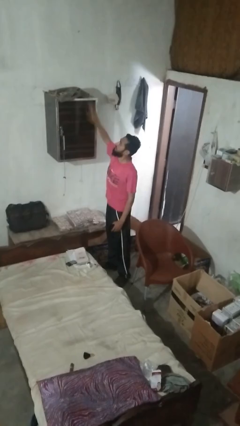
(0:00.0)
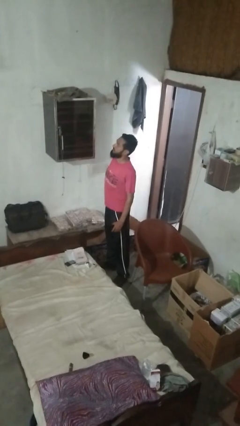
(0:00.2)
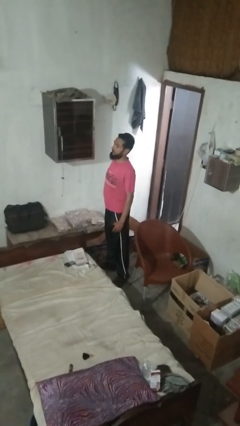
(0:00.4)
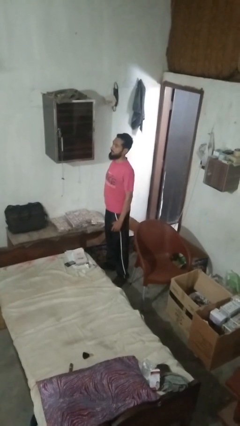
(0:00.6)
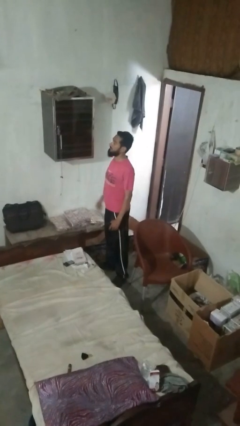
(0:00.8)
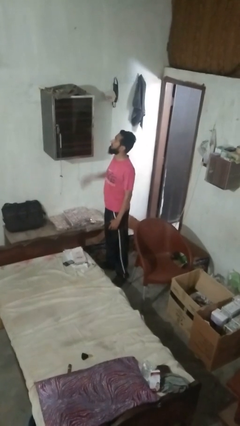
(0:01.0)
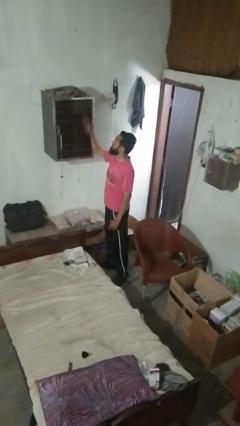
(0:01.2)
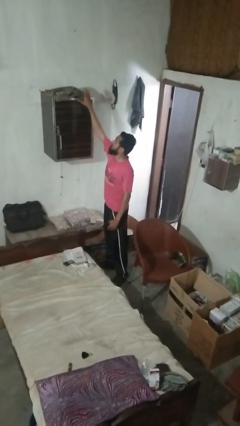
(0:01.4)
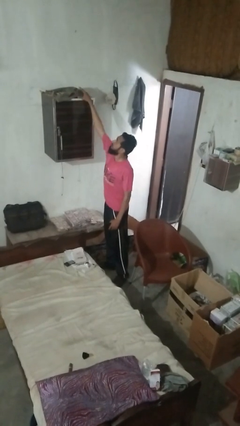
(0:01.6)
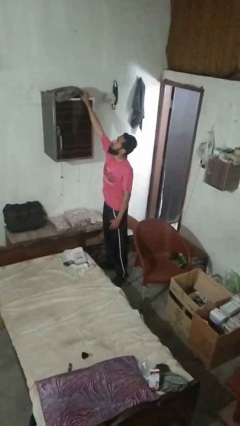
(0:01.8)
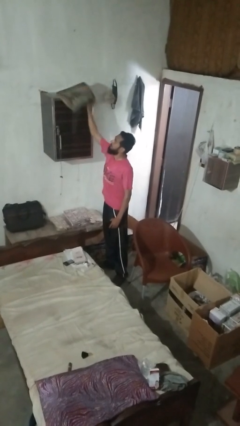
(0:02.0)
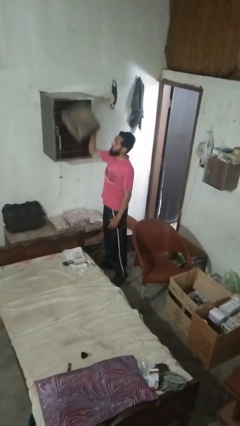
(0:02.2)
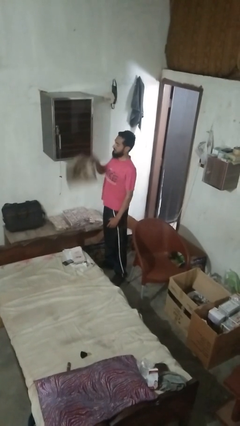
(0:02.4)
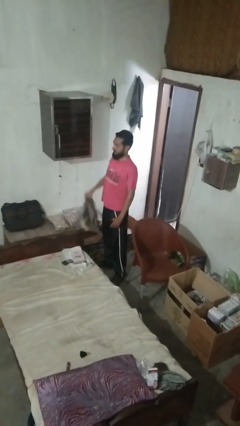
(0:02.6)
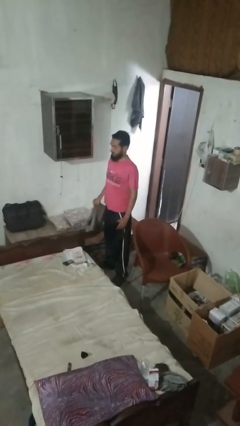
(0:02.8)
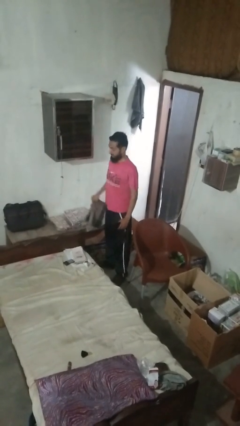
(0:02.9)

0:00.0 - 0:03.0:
person picks up object from shelf

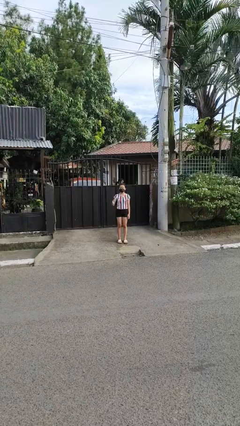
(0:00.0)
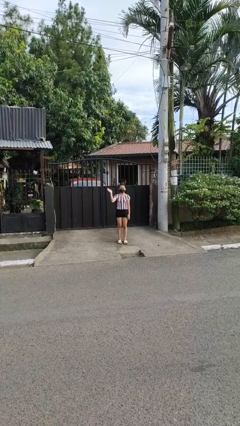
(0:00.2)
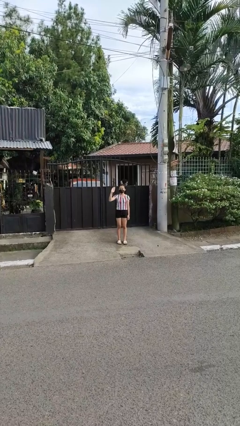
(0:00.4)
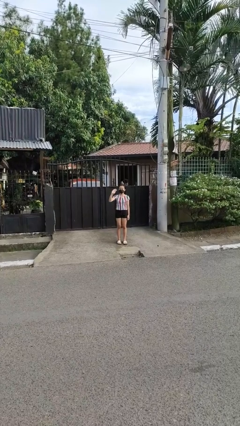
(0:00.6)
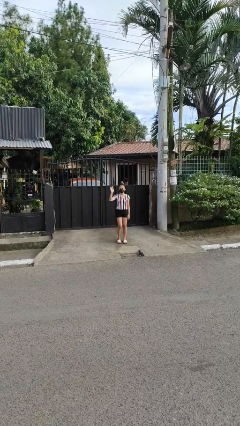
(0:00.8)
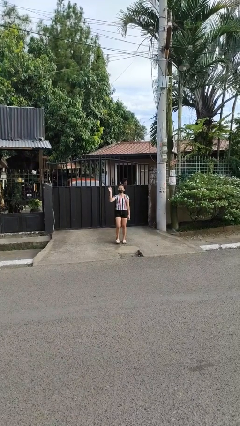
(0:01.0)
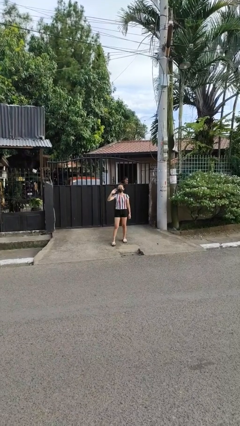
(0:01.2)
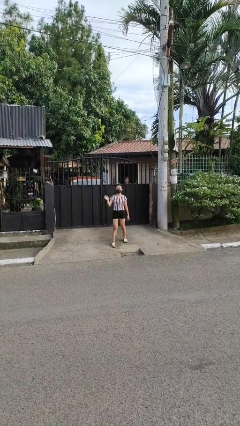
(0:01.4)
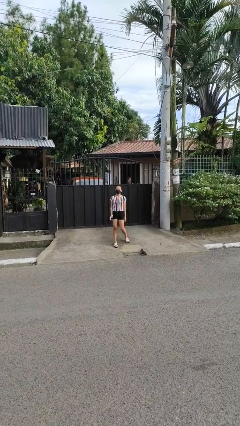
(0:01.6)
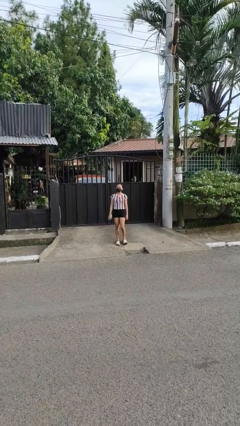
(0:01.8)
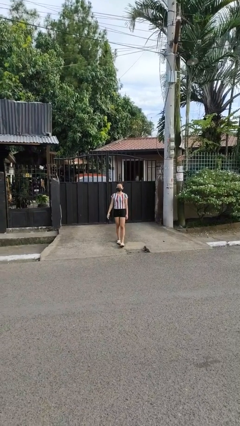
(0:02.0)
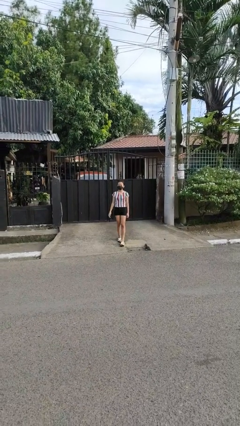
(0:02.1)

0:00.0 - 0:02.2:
person waves at person

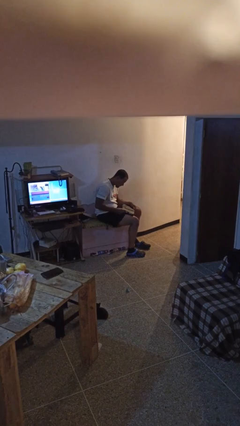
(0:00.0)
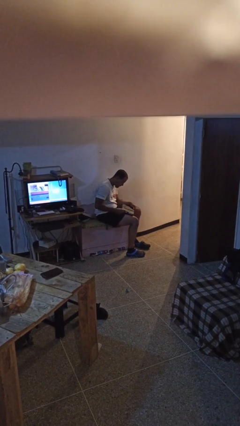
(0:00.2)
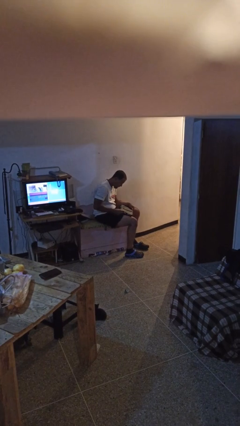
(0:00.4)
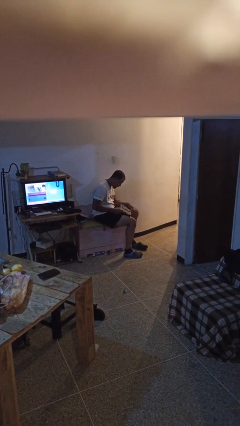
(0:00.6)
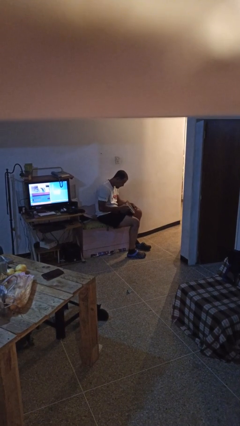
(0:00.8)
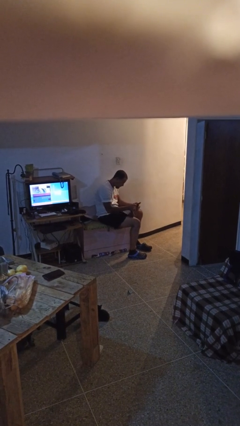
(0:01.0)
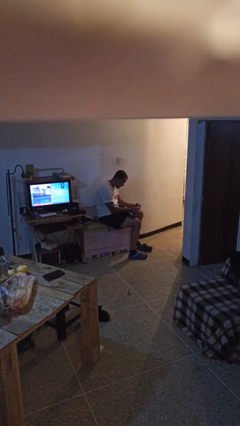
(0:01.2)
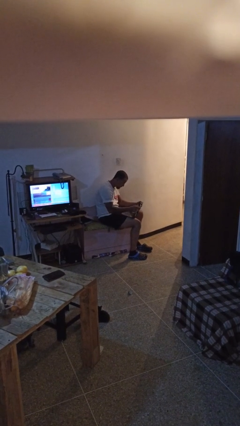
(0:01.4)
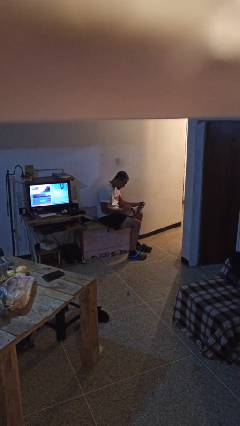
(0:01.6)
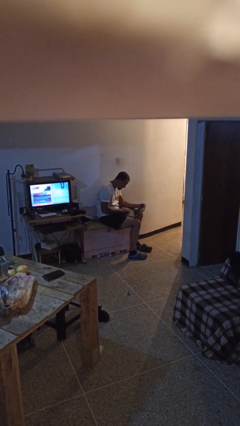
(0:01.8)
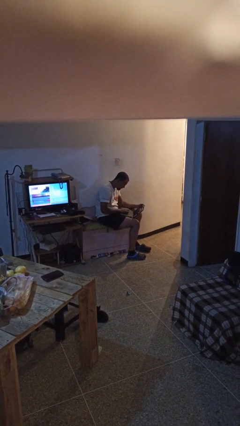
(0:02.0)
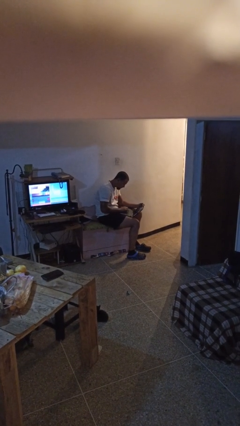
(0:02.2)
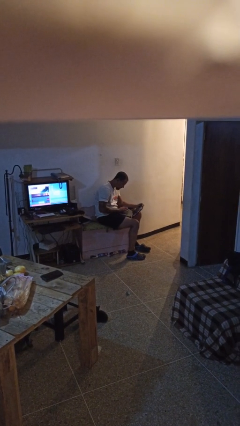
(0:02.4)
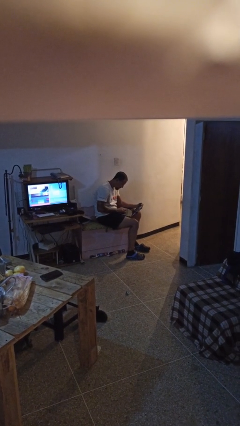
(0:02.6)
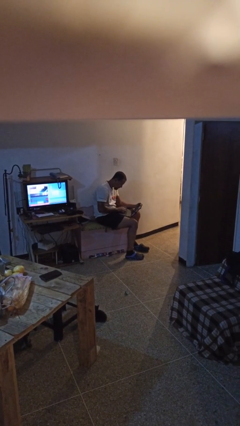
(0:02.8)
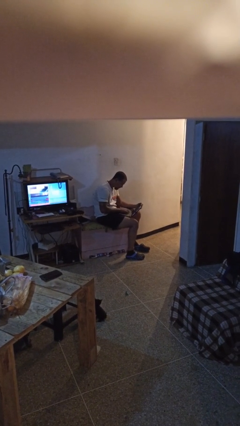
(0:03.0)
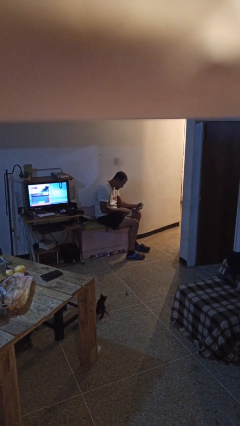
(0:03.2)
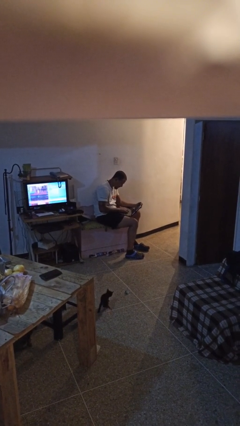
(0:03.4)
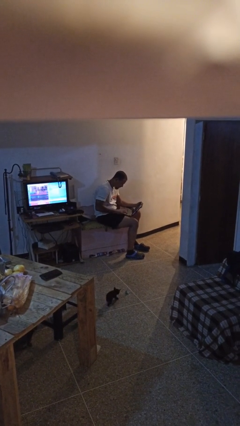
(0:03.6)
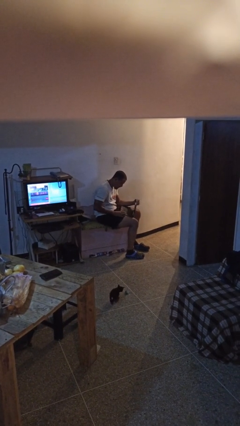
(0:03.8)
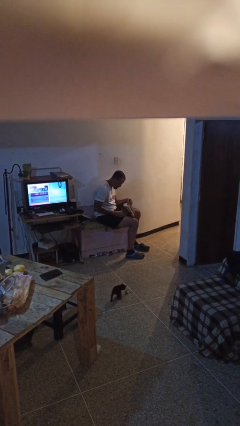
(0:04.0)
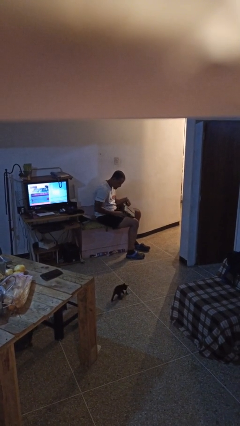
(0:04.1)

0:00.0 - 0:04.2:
person interacts with laptop

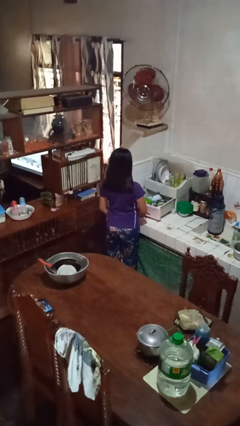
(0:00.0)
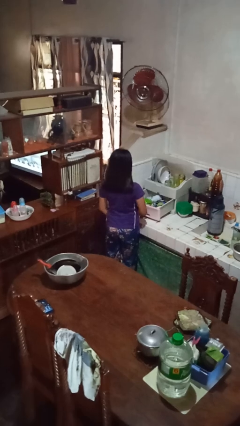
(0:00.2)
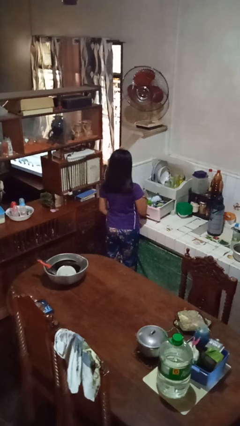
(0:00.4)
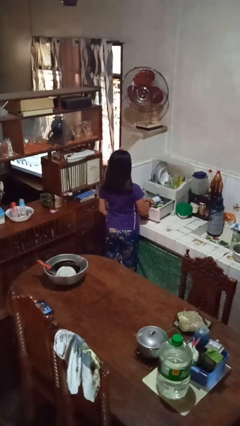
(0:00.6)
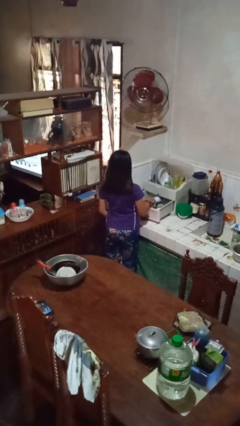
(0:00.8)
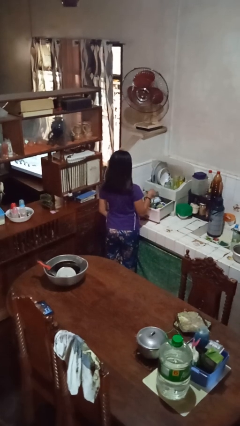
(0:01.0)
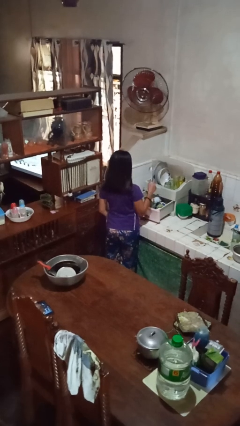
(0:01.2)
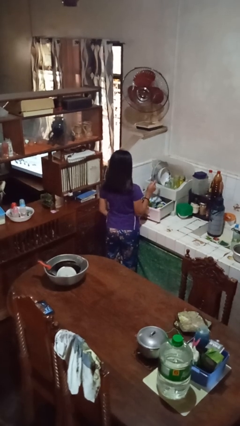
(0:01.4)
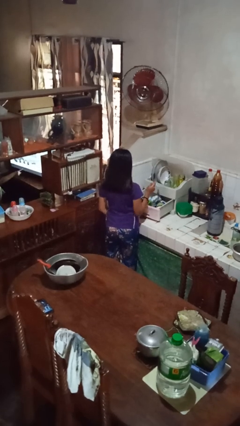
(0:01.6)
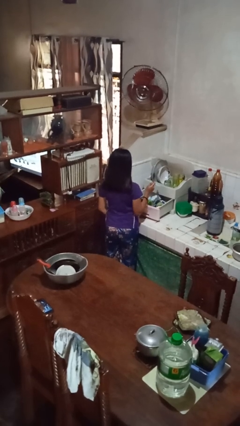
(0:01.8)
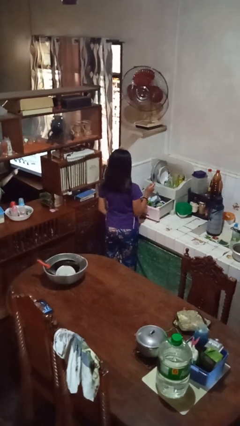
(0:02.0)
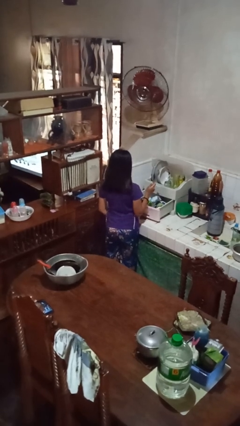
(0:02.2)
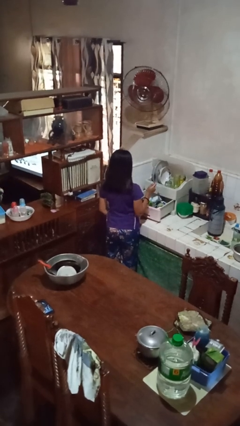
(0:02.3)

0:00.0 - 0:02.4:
person takes object from kitchen drawer

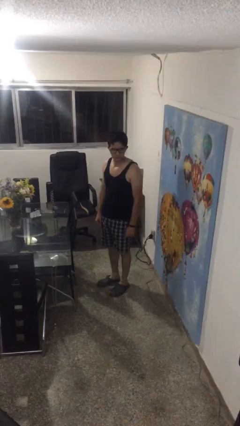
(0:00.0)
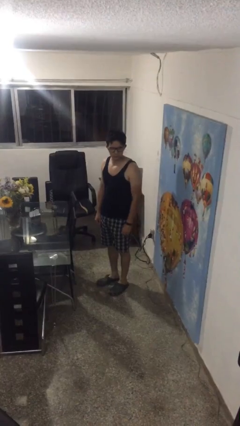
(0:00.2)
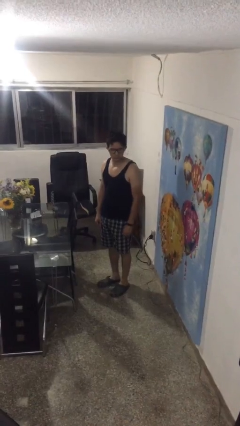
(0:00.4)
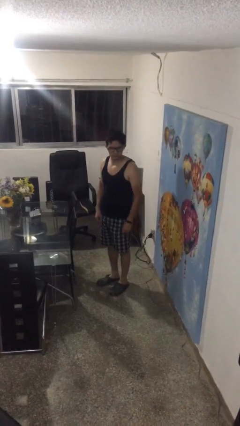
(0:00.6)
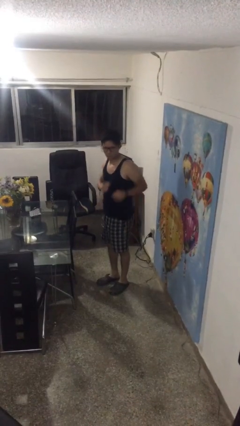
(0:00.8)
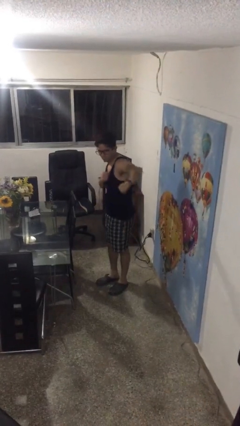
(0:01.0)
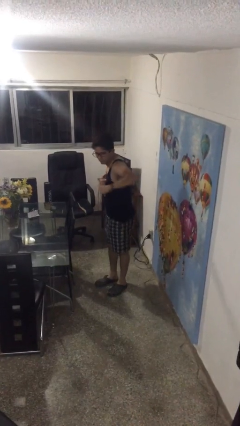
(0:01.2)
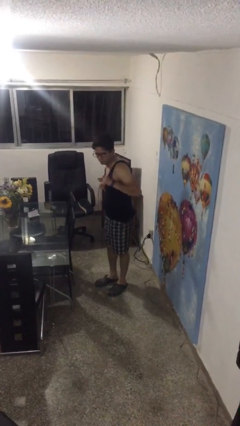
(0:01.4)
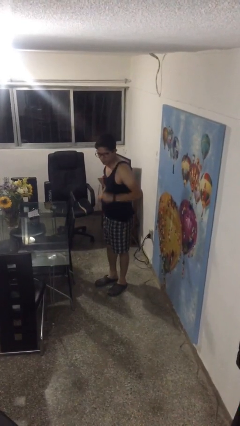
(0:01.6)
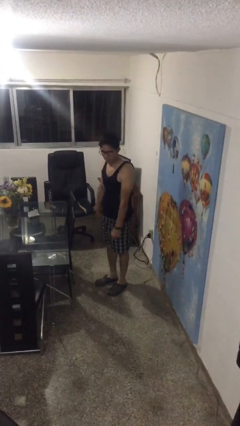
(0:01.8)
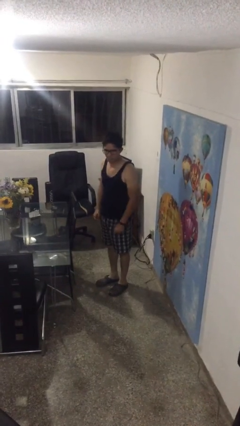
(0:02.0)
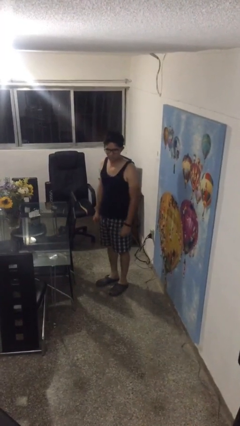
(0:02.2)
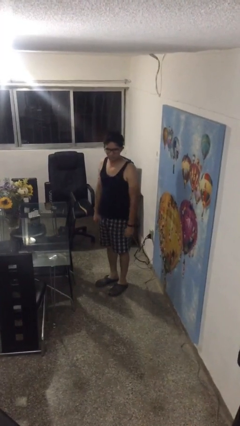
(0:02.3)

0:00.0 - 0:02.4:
person karate chop

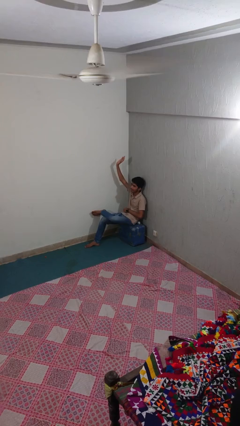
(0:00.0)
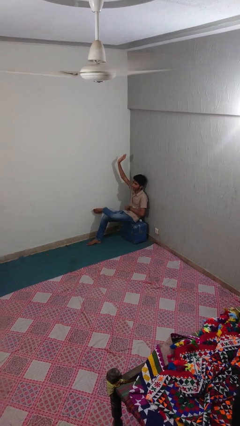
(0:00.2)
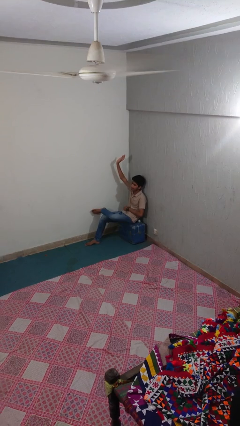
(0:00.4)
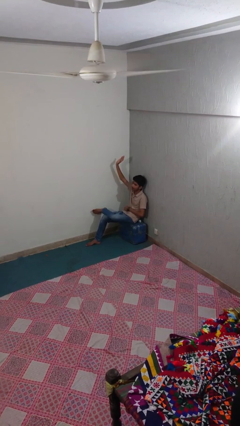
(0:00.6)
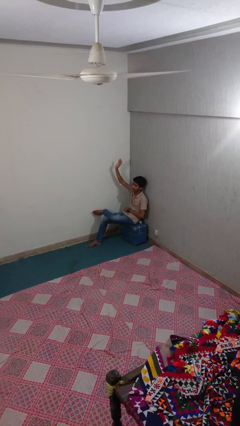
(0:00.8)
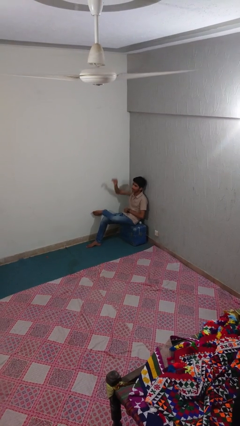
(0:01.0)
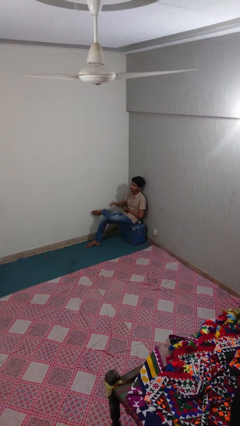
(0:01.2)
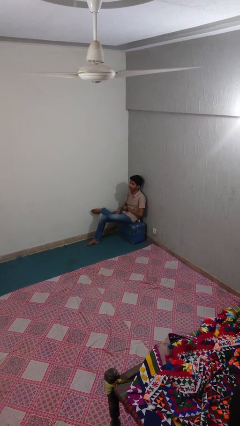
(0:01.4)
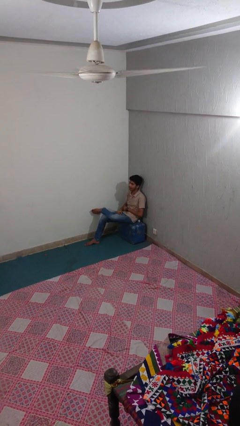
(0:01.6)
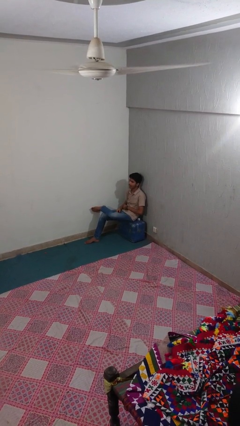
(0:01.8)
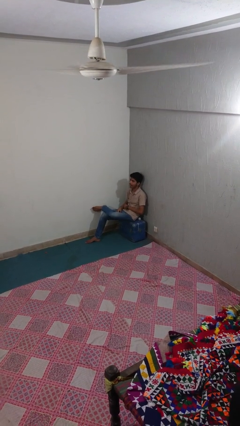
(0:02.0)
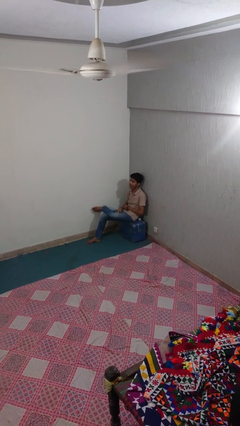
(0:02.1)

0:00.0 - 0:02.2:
person gestures lower hand

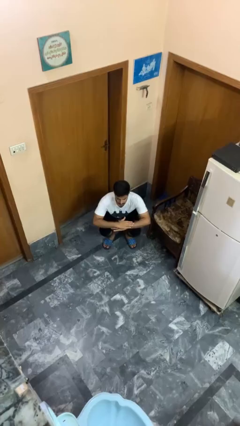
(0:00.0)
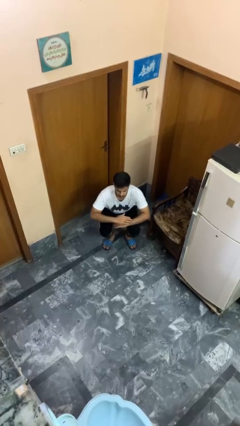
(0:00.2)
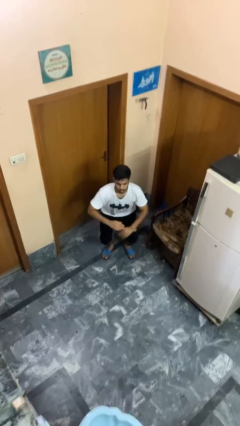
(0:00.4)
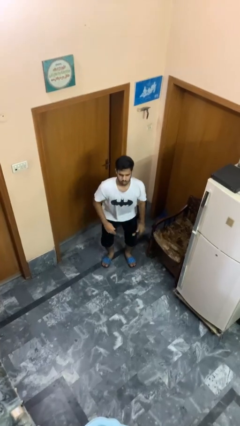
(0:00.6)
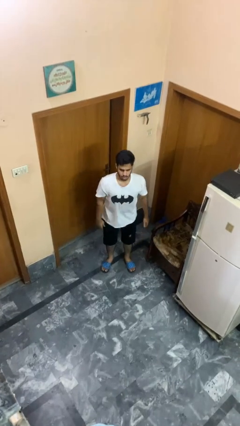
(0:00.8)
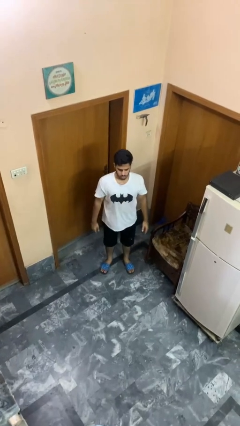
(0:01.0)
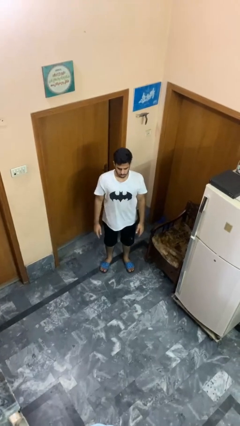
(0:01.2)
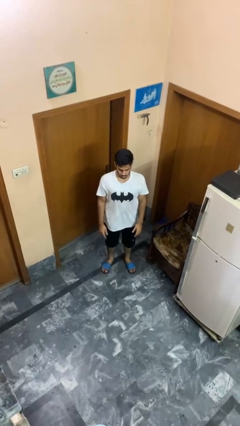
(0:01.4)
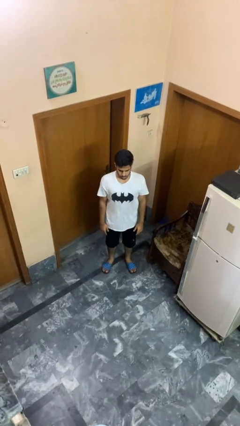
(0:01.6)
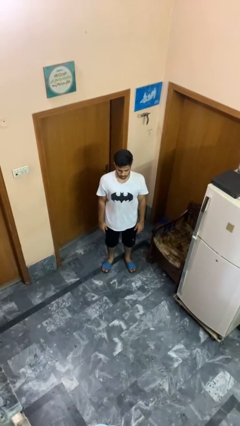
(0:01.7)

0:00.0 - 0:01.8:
person stands up
